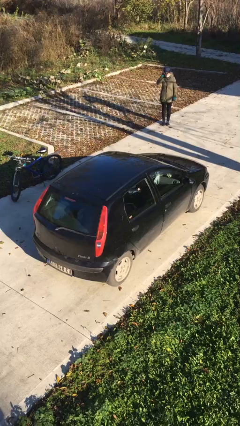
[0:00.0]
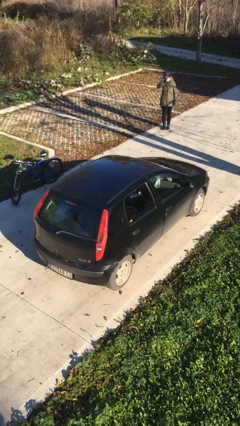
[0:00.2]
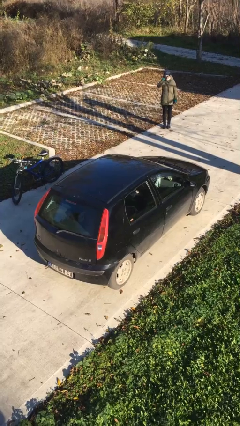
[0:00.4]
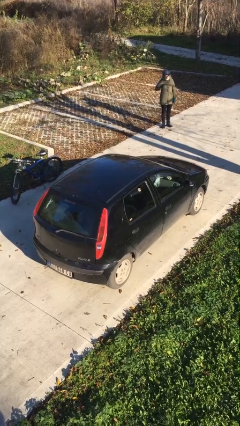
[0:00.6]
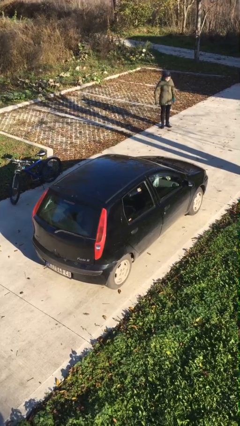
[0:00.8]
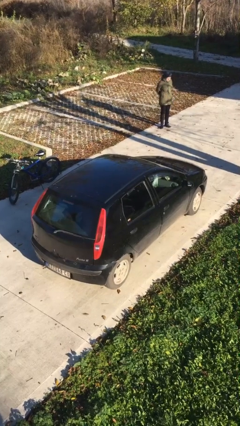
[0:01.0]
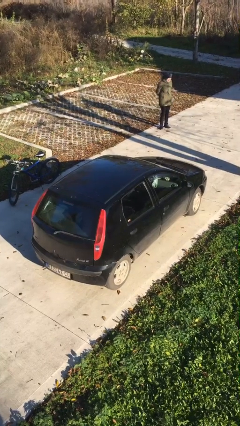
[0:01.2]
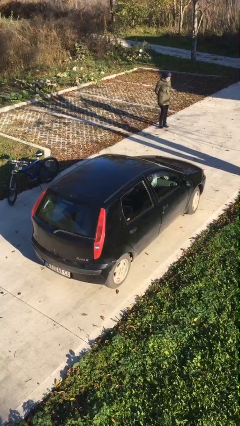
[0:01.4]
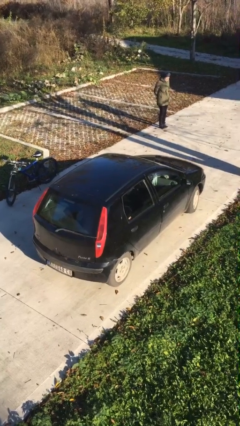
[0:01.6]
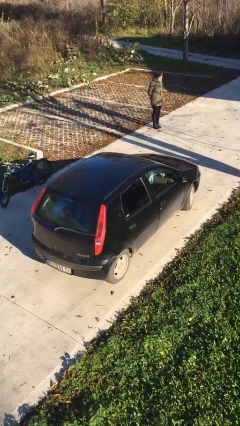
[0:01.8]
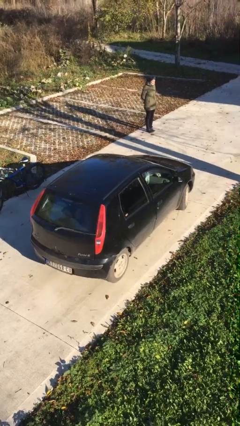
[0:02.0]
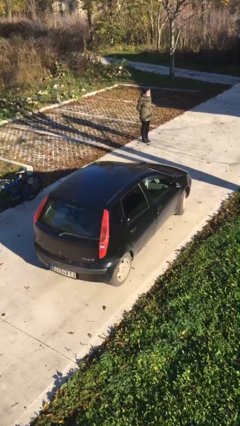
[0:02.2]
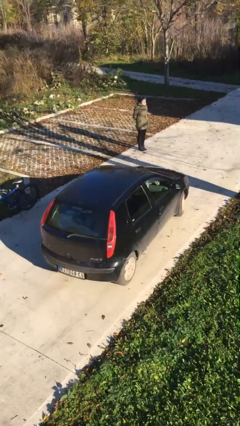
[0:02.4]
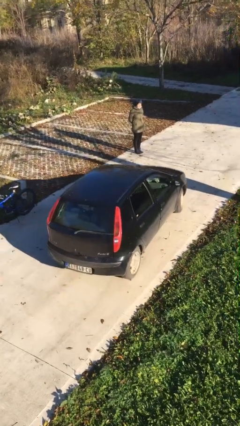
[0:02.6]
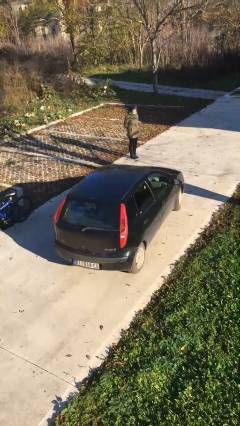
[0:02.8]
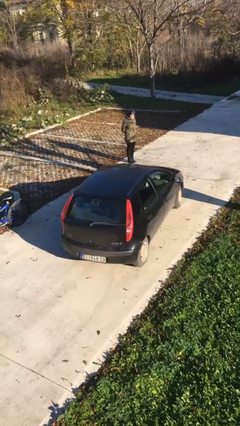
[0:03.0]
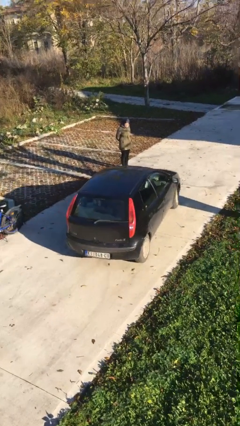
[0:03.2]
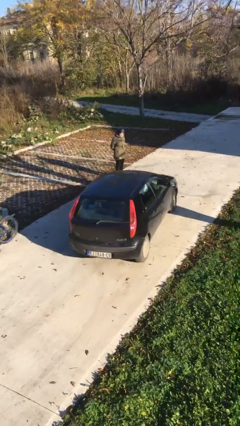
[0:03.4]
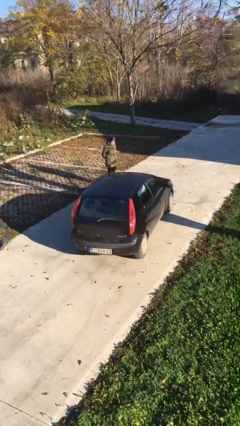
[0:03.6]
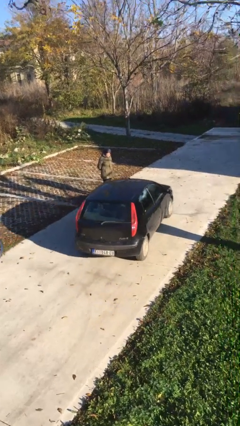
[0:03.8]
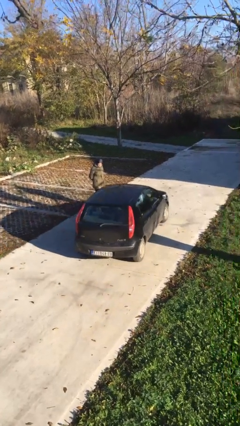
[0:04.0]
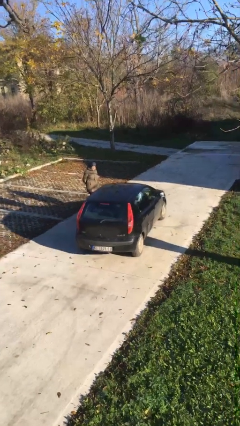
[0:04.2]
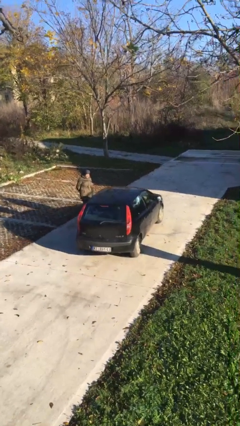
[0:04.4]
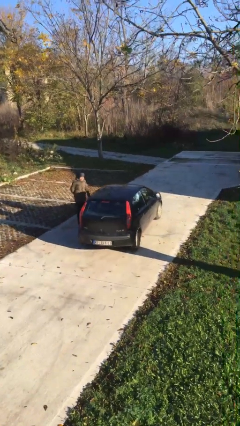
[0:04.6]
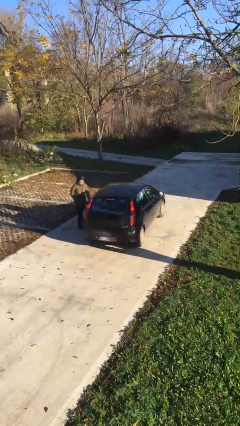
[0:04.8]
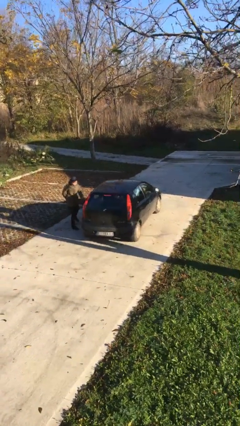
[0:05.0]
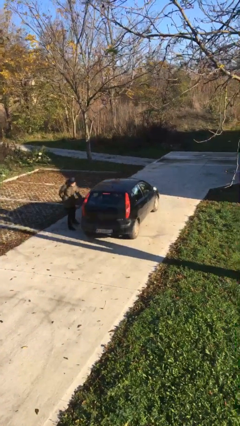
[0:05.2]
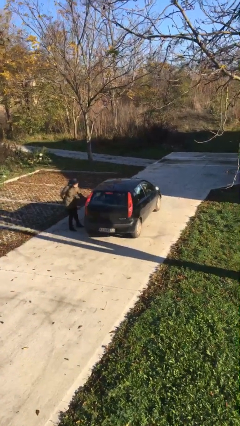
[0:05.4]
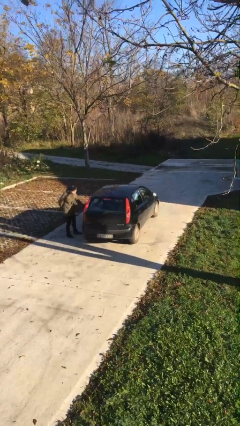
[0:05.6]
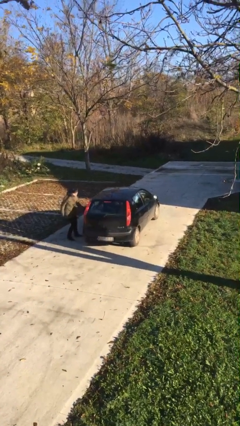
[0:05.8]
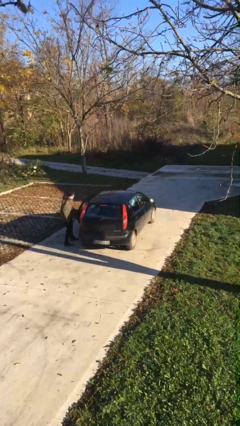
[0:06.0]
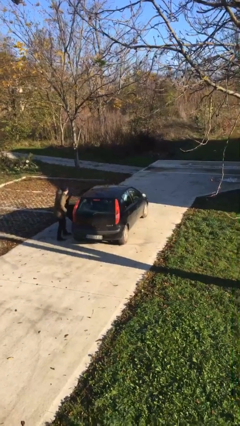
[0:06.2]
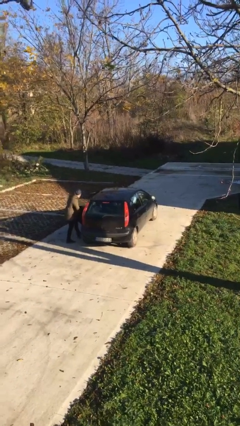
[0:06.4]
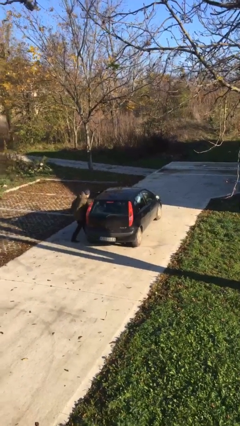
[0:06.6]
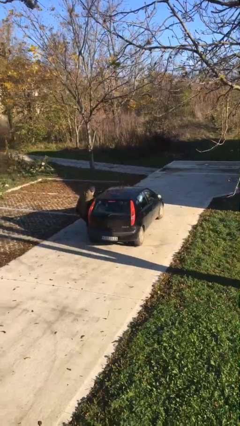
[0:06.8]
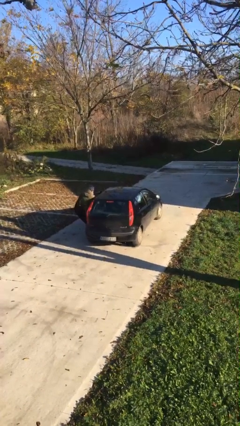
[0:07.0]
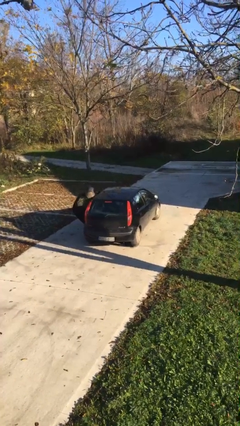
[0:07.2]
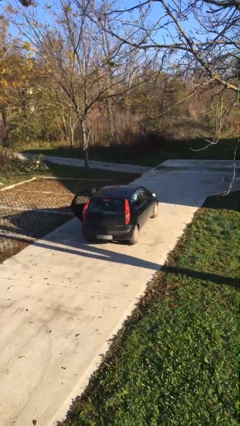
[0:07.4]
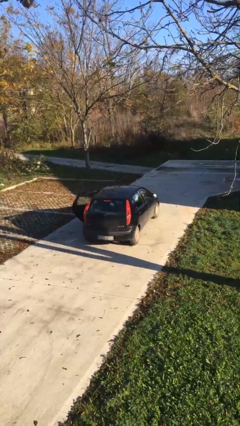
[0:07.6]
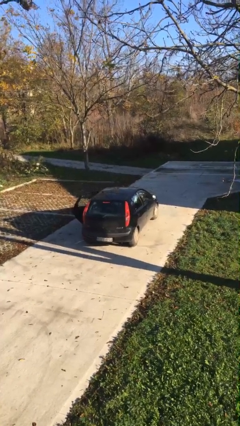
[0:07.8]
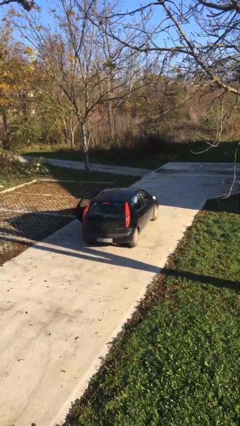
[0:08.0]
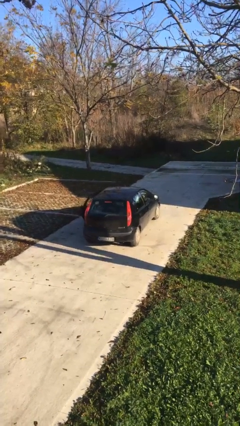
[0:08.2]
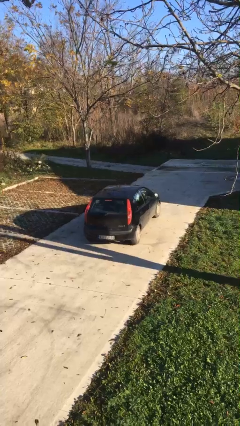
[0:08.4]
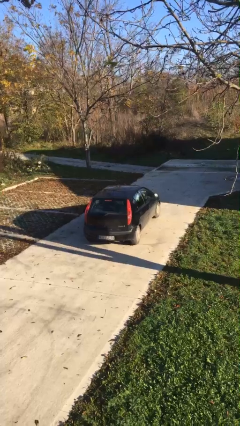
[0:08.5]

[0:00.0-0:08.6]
car picks up person

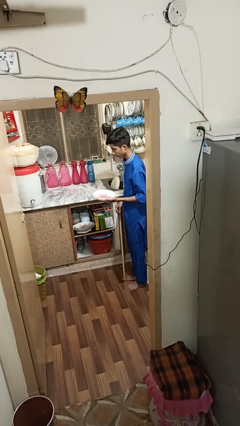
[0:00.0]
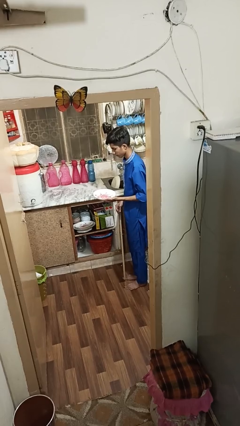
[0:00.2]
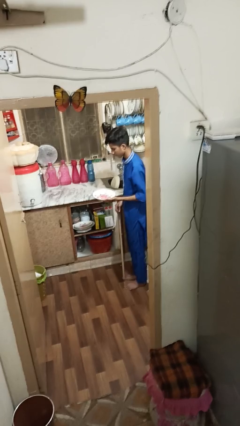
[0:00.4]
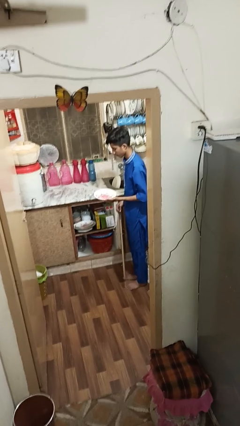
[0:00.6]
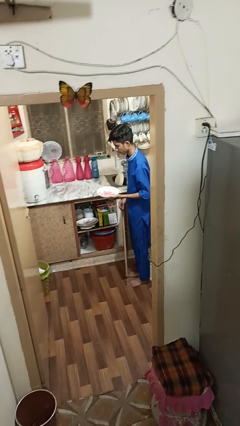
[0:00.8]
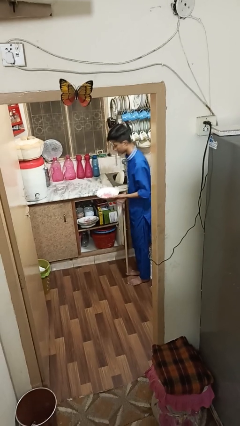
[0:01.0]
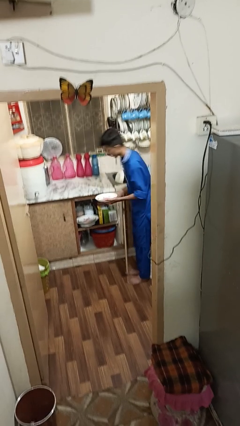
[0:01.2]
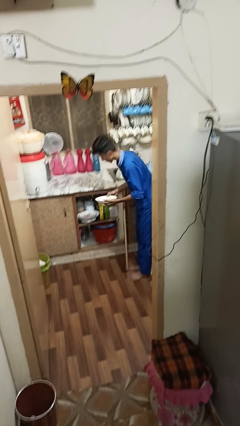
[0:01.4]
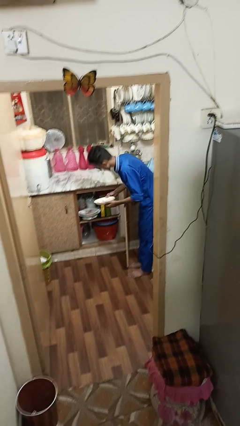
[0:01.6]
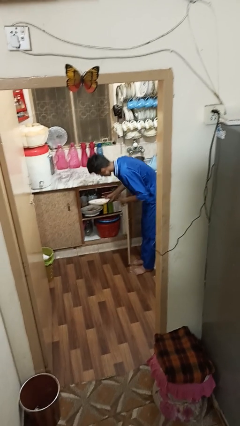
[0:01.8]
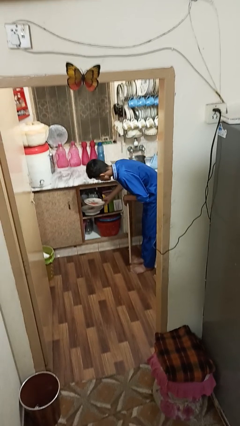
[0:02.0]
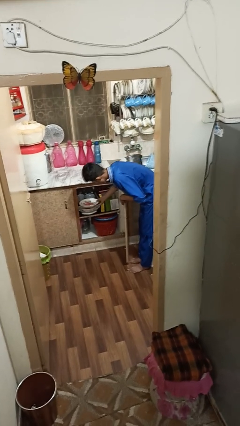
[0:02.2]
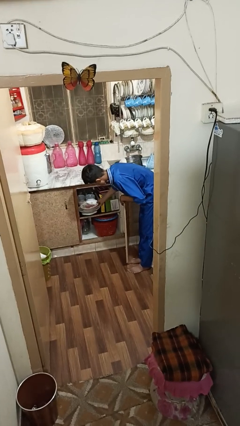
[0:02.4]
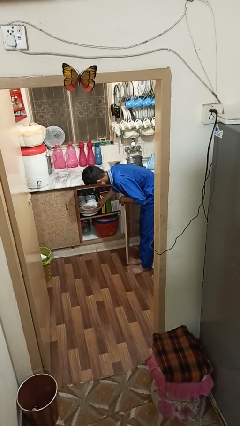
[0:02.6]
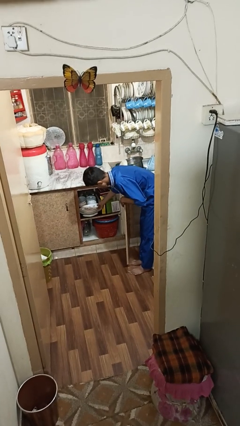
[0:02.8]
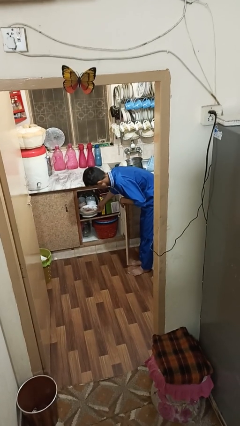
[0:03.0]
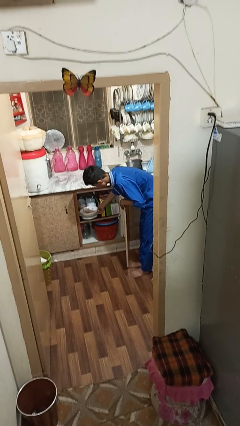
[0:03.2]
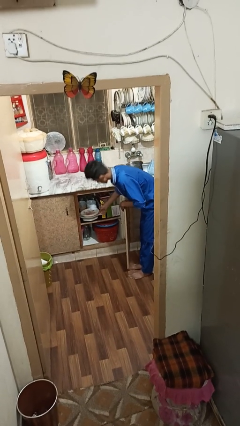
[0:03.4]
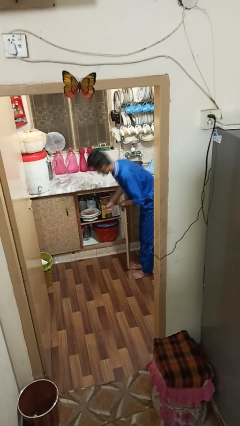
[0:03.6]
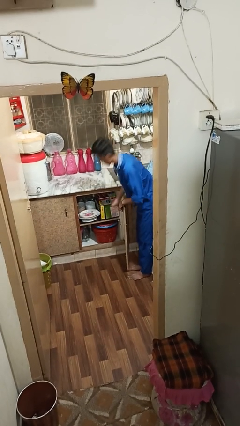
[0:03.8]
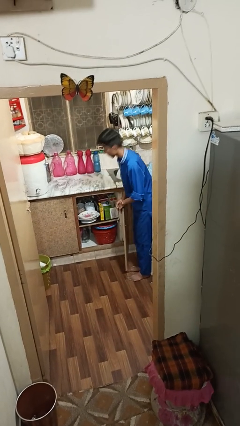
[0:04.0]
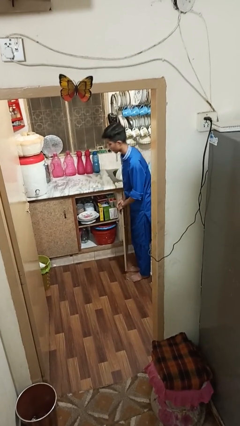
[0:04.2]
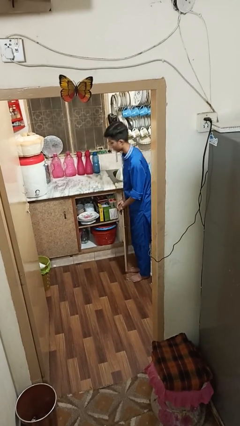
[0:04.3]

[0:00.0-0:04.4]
person puts object in cabinet

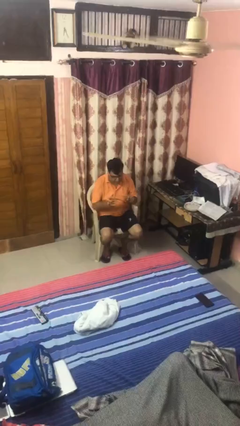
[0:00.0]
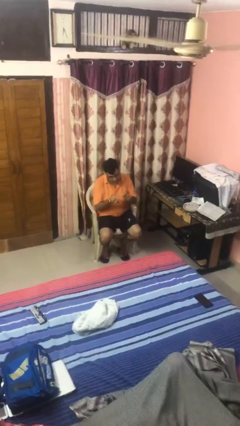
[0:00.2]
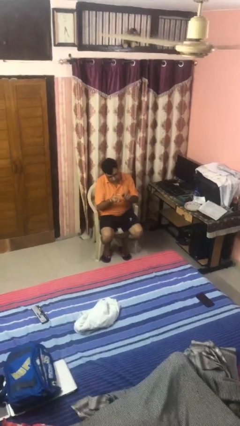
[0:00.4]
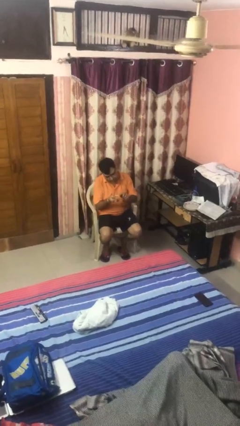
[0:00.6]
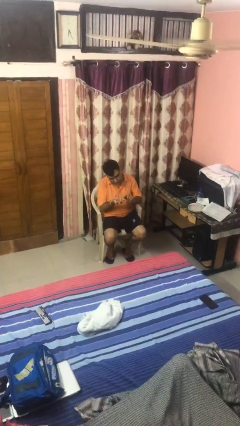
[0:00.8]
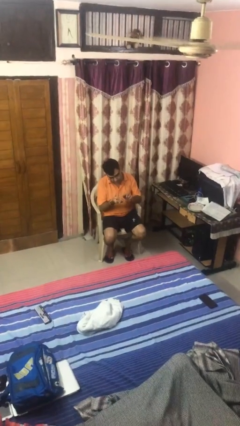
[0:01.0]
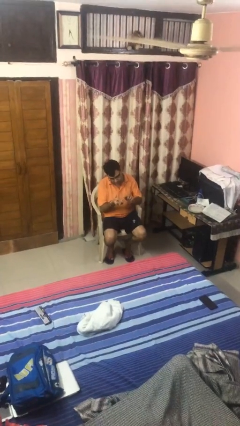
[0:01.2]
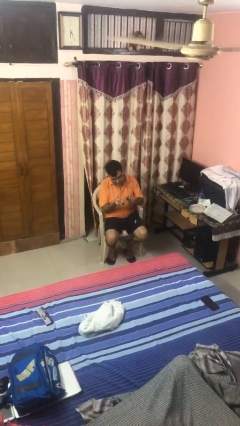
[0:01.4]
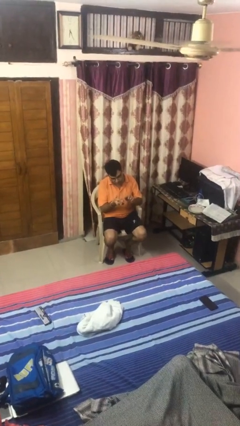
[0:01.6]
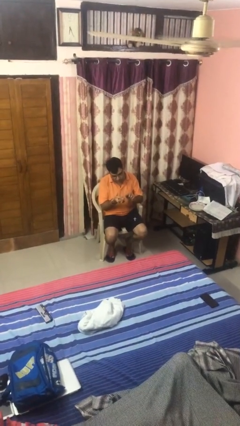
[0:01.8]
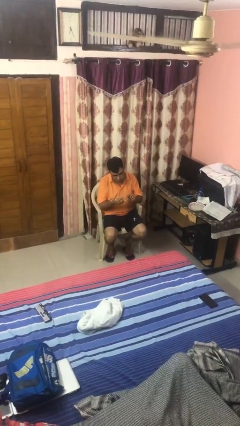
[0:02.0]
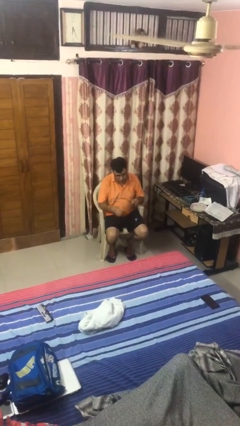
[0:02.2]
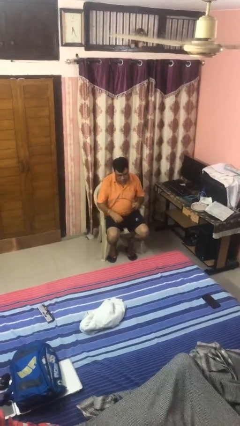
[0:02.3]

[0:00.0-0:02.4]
person files fingernails

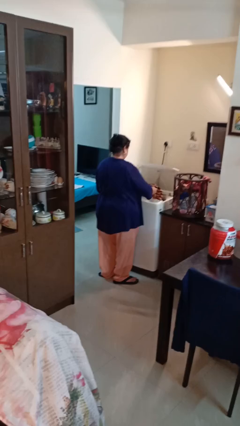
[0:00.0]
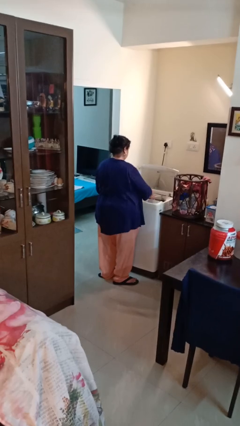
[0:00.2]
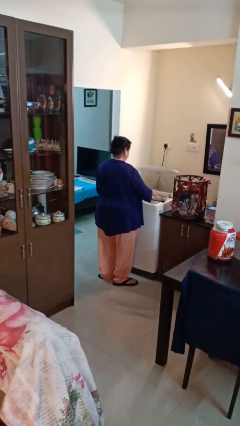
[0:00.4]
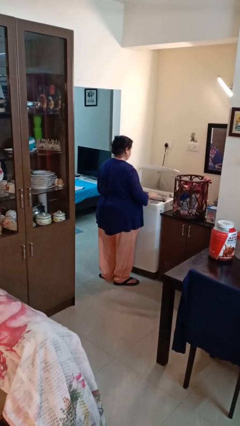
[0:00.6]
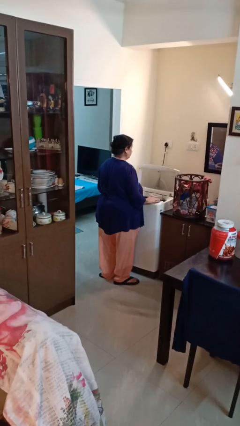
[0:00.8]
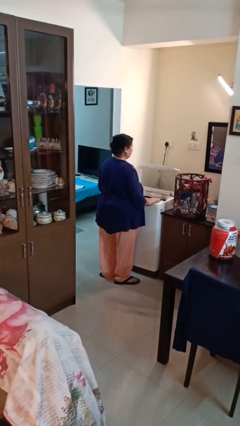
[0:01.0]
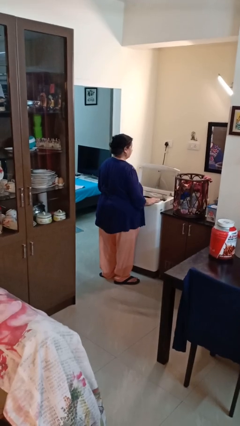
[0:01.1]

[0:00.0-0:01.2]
person loads clotheswasher

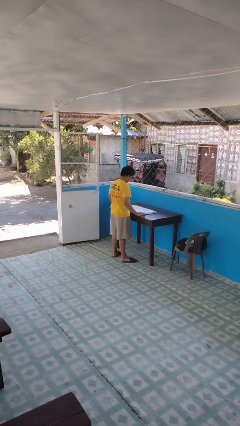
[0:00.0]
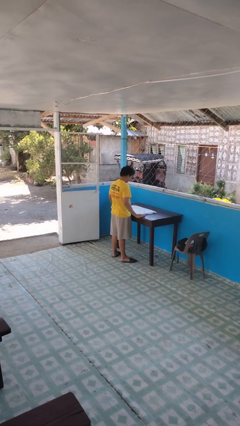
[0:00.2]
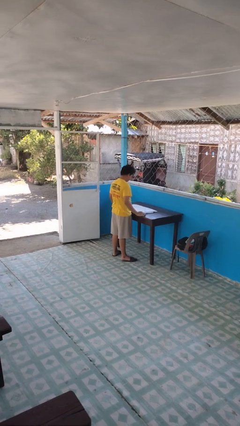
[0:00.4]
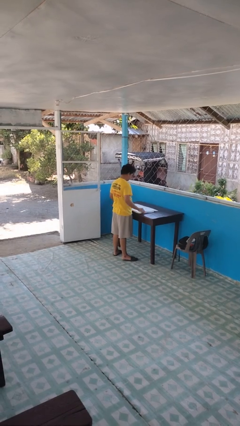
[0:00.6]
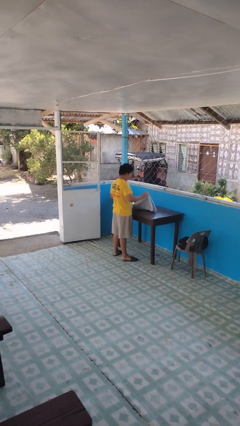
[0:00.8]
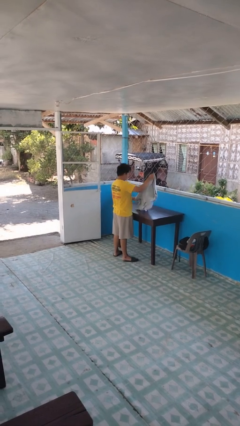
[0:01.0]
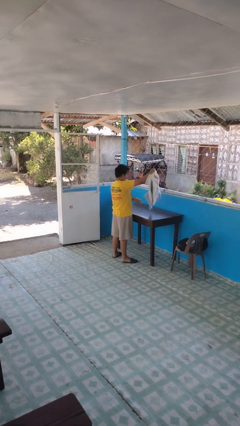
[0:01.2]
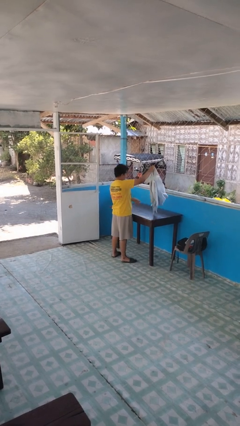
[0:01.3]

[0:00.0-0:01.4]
person unfolds blanket
